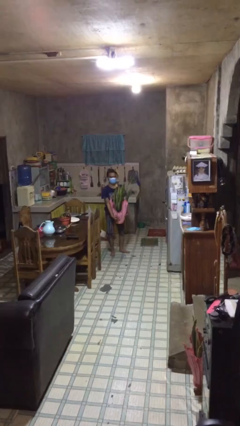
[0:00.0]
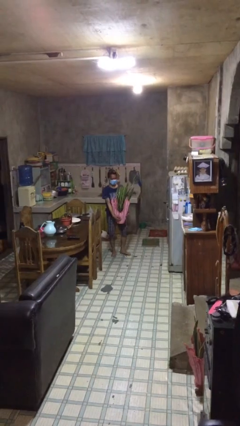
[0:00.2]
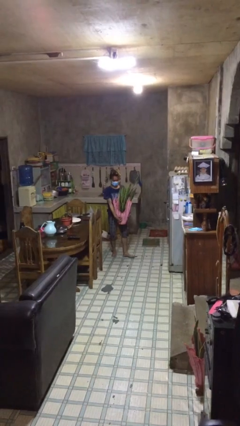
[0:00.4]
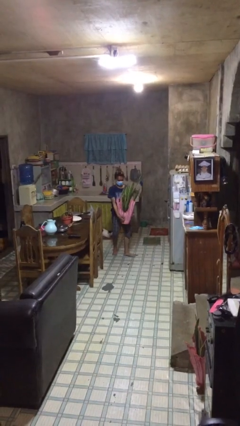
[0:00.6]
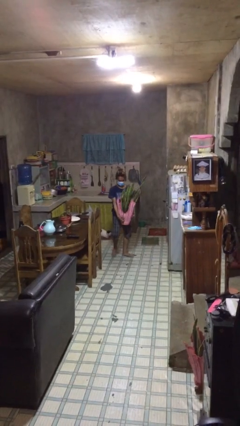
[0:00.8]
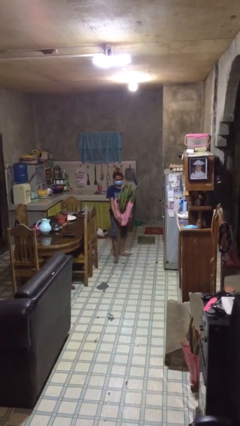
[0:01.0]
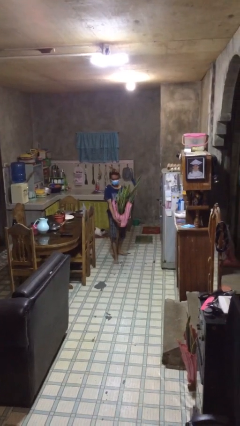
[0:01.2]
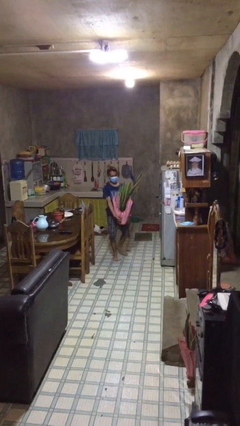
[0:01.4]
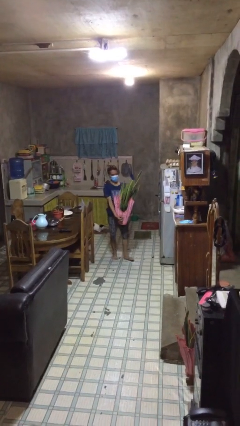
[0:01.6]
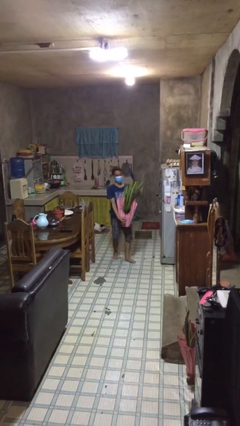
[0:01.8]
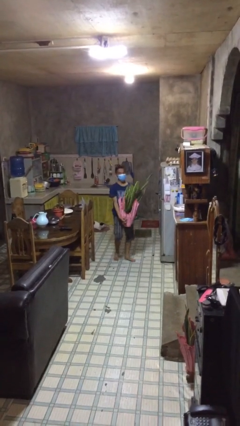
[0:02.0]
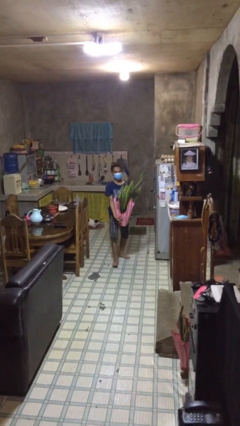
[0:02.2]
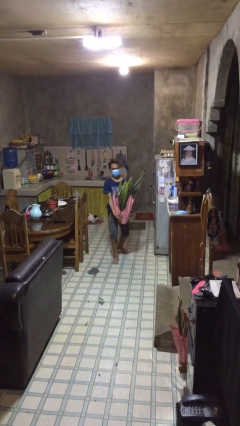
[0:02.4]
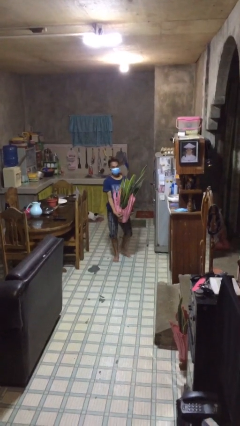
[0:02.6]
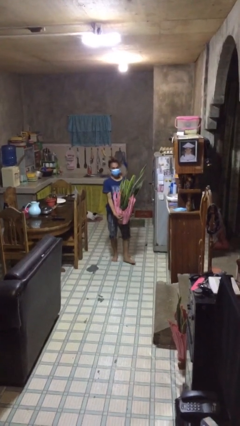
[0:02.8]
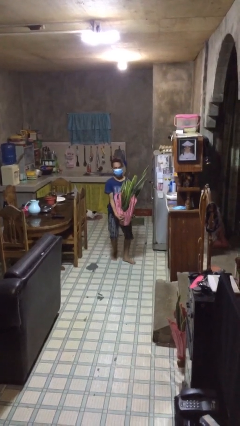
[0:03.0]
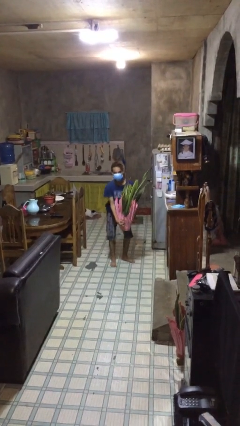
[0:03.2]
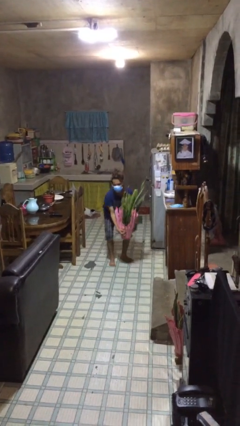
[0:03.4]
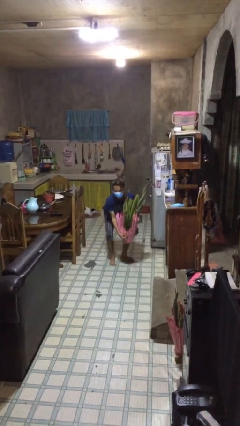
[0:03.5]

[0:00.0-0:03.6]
person carries heavy object

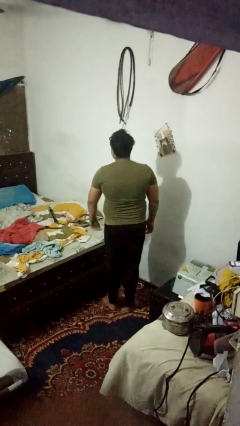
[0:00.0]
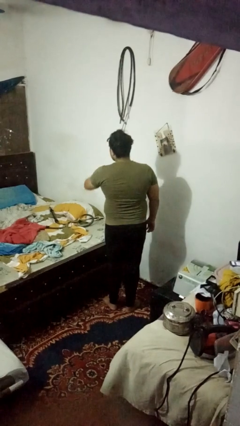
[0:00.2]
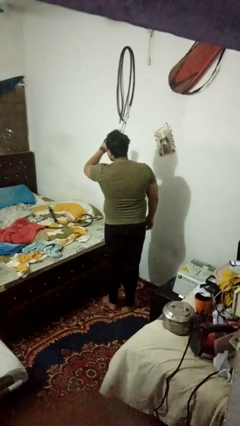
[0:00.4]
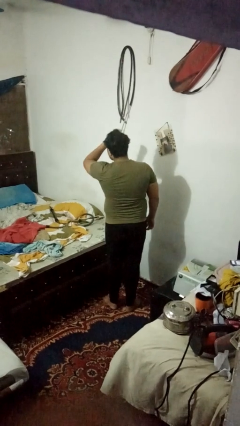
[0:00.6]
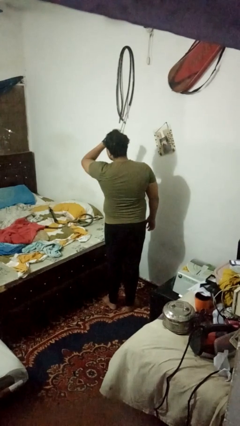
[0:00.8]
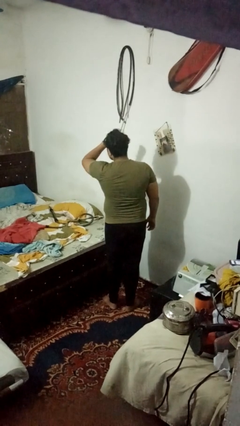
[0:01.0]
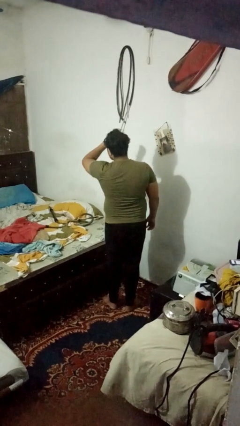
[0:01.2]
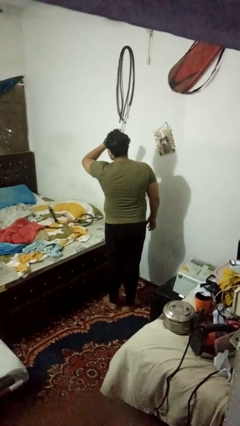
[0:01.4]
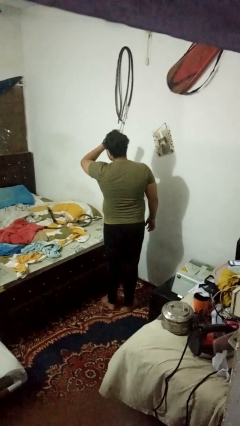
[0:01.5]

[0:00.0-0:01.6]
person gestures watch closely

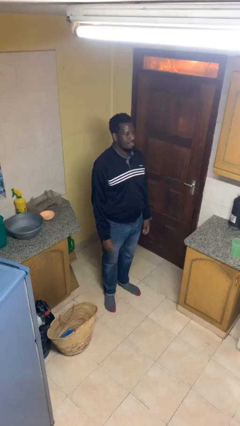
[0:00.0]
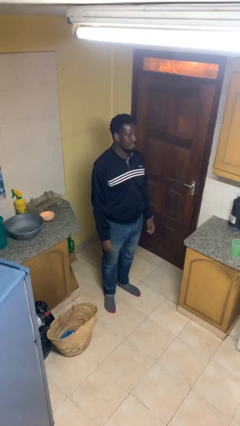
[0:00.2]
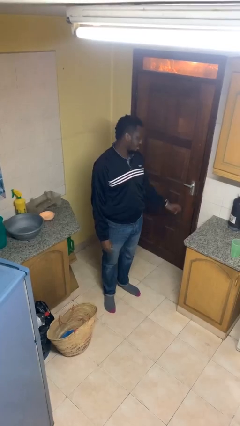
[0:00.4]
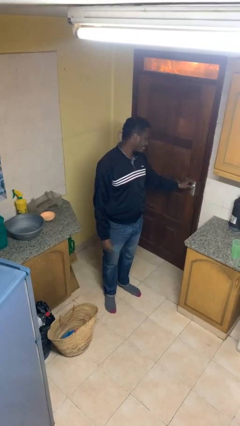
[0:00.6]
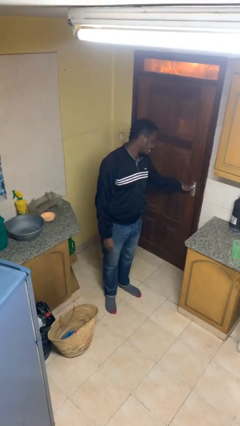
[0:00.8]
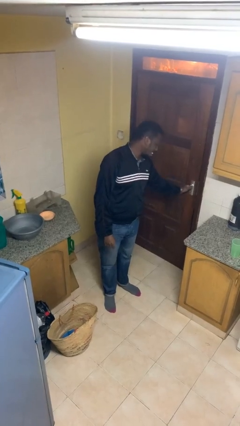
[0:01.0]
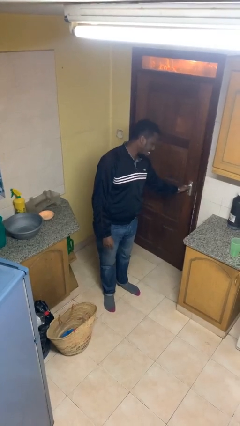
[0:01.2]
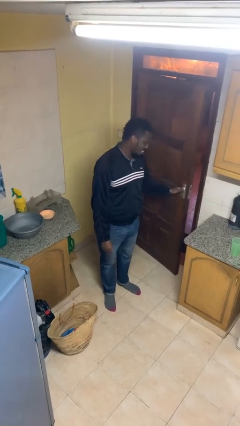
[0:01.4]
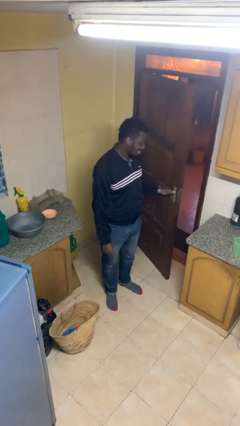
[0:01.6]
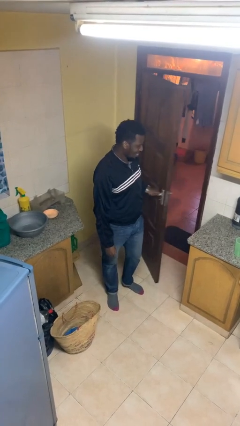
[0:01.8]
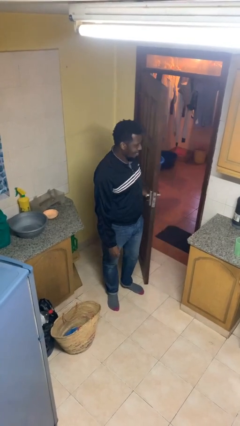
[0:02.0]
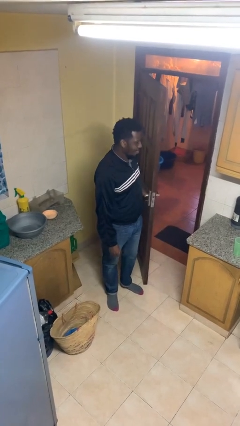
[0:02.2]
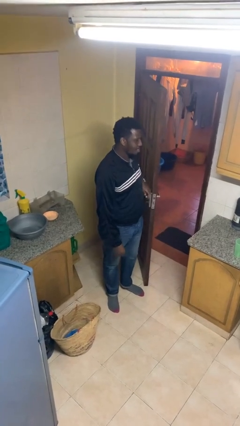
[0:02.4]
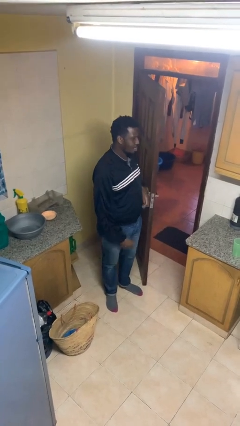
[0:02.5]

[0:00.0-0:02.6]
person opens facility door

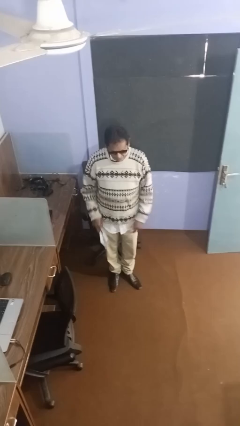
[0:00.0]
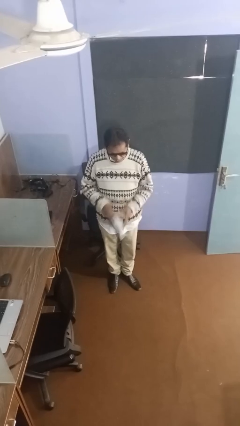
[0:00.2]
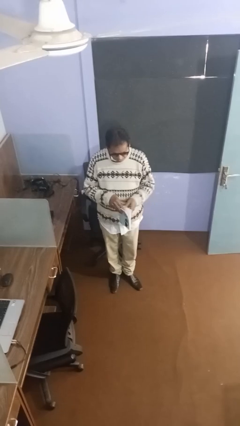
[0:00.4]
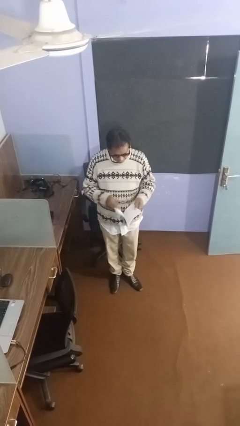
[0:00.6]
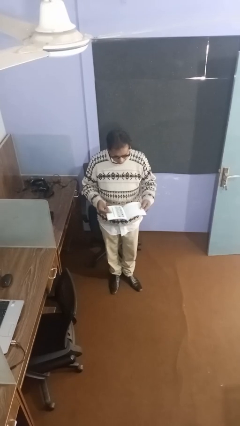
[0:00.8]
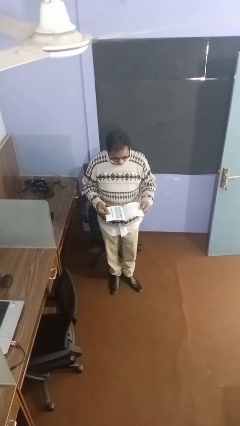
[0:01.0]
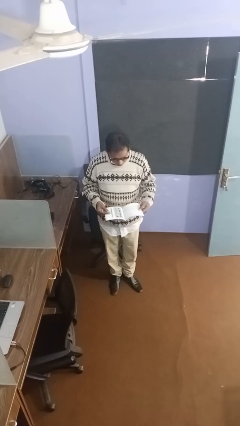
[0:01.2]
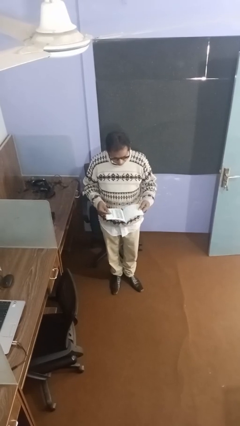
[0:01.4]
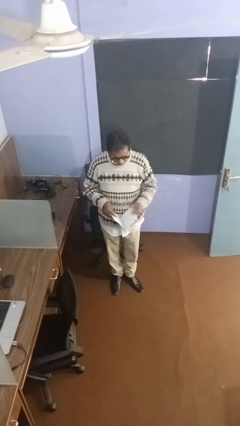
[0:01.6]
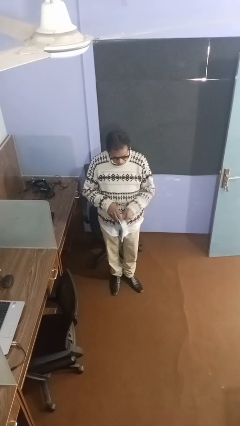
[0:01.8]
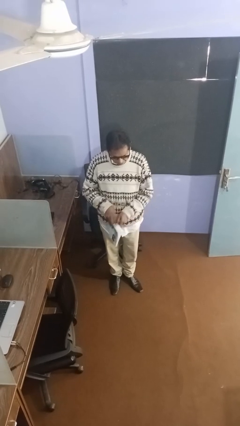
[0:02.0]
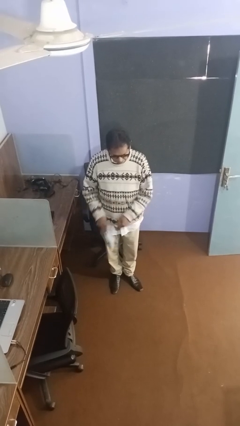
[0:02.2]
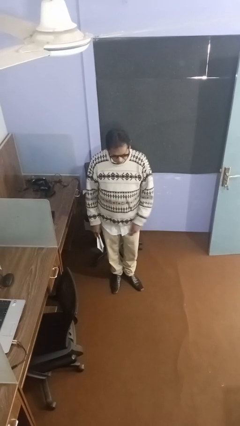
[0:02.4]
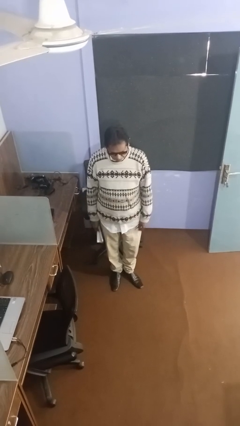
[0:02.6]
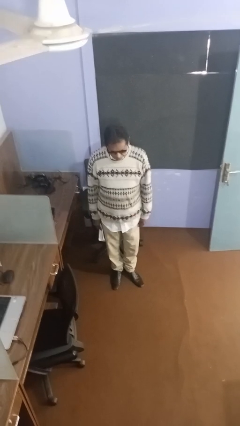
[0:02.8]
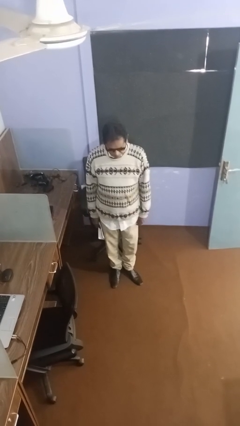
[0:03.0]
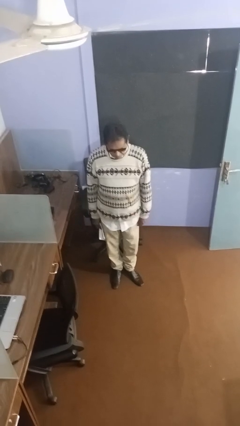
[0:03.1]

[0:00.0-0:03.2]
person reads document

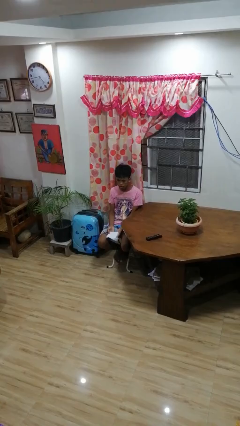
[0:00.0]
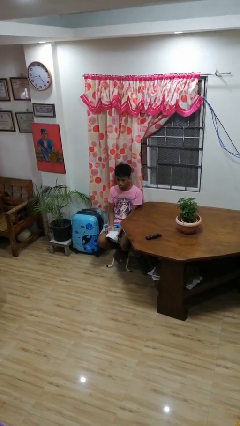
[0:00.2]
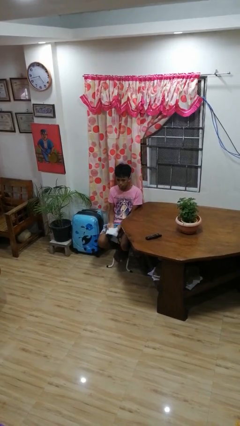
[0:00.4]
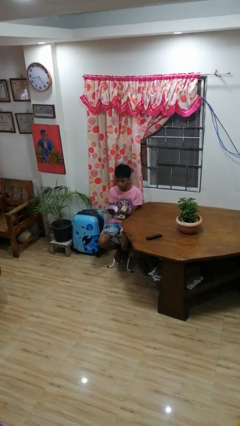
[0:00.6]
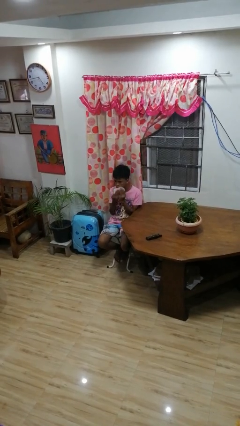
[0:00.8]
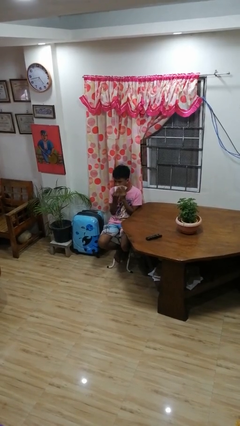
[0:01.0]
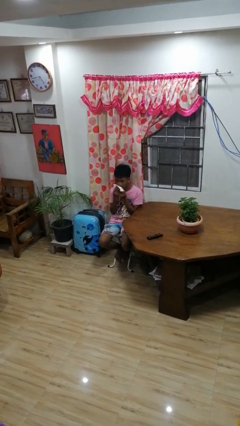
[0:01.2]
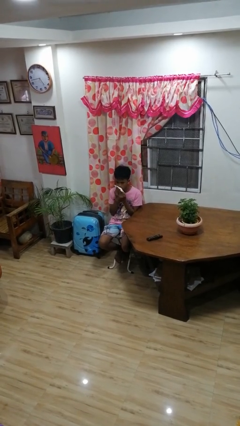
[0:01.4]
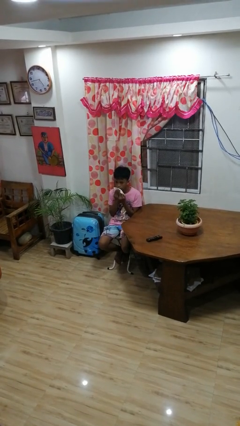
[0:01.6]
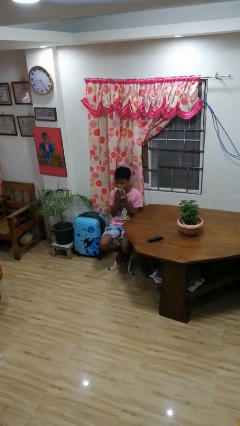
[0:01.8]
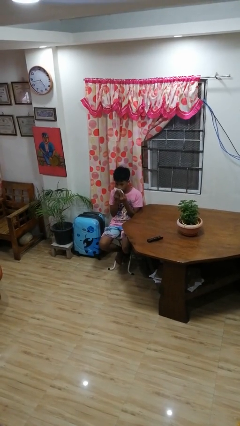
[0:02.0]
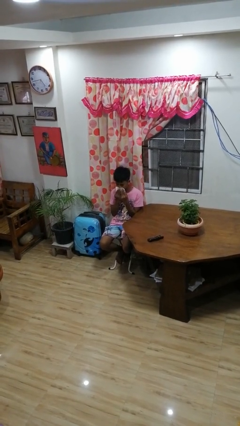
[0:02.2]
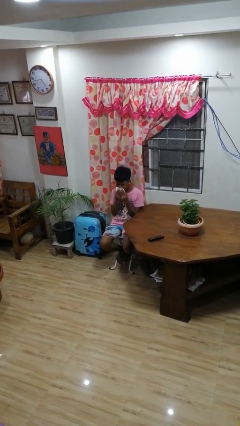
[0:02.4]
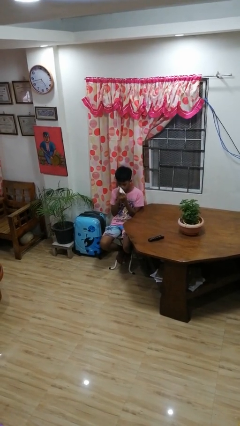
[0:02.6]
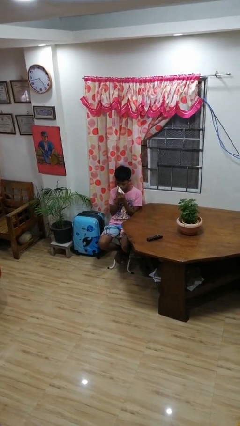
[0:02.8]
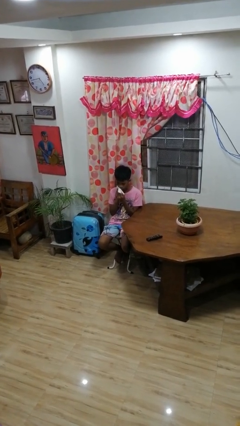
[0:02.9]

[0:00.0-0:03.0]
person wipes mouth with napkin

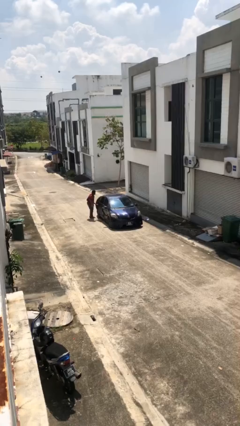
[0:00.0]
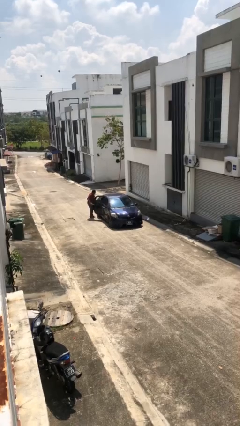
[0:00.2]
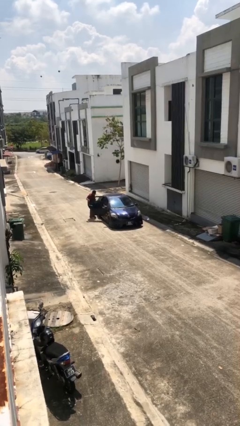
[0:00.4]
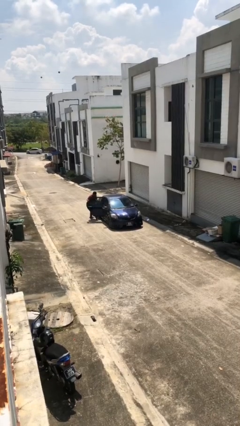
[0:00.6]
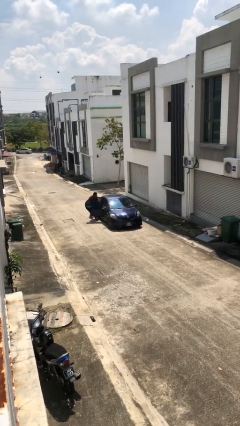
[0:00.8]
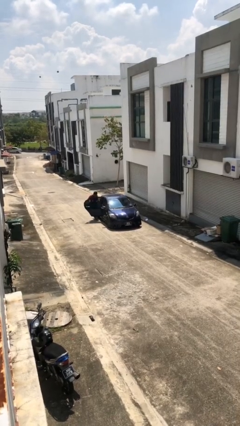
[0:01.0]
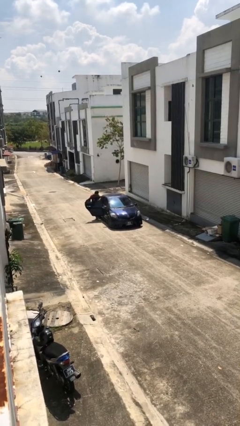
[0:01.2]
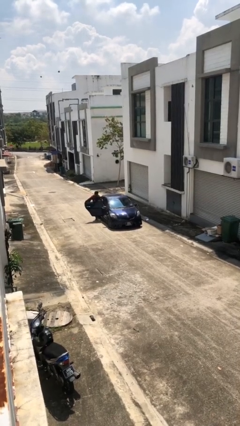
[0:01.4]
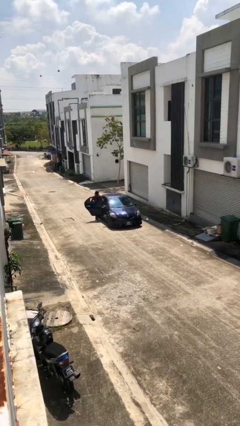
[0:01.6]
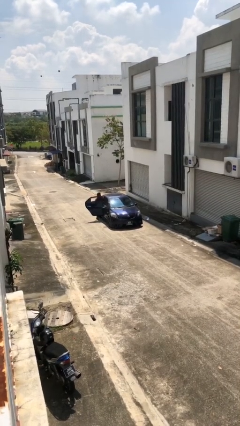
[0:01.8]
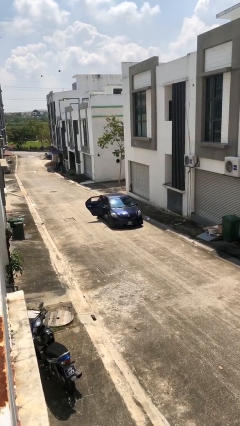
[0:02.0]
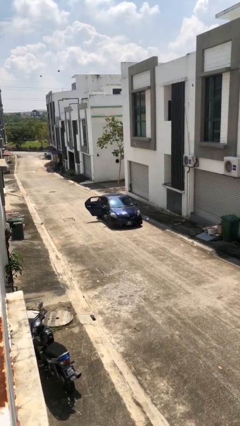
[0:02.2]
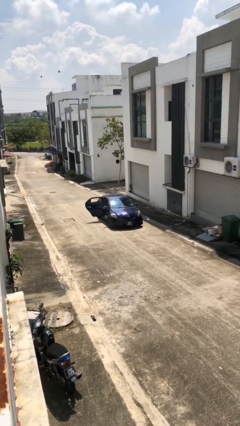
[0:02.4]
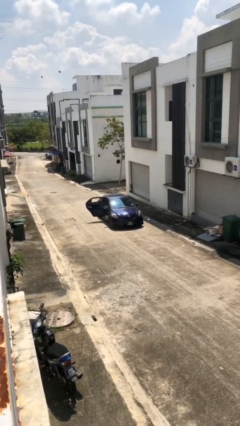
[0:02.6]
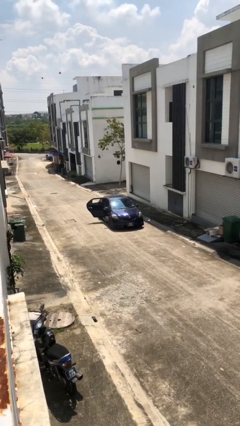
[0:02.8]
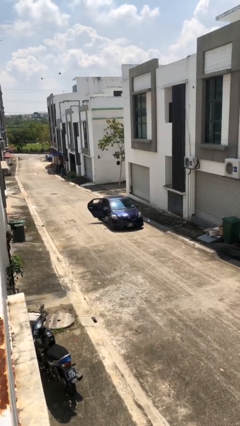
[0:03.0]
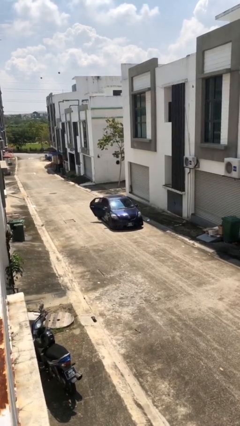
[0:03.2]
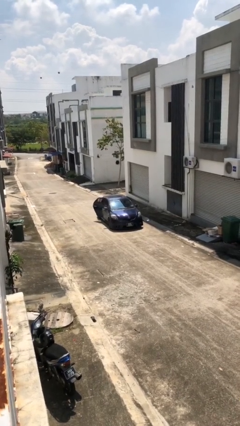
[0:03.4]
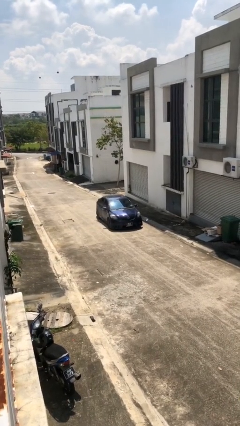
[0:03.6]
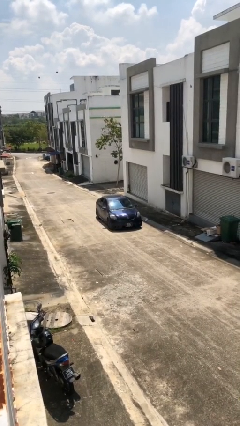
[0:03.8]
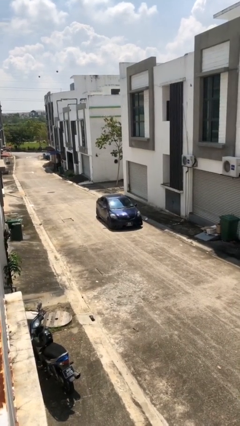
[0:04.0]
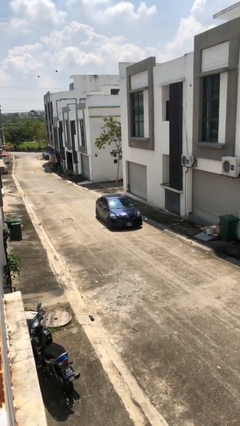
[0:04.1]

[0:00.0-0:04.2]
car picks up person
